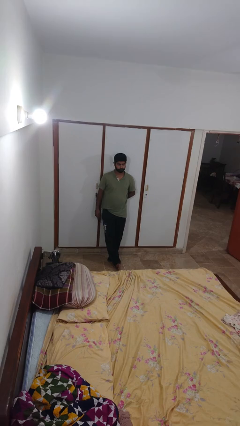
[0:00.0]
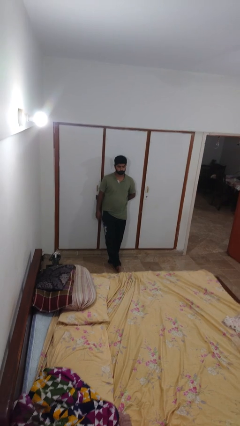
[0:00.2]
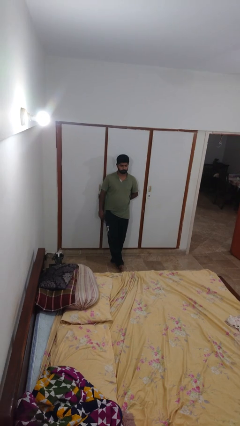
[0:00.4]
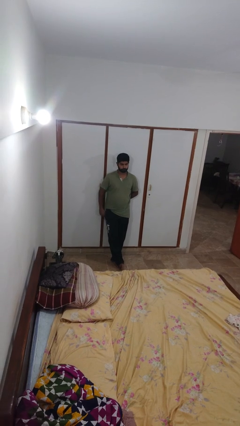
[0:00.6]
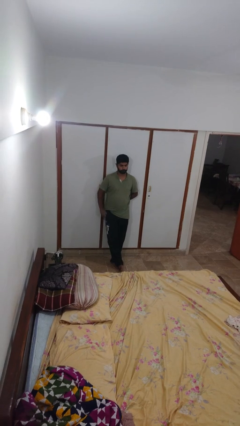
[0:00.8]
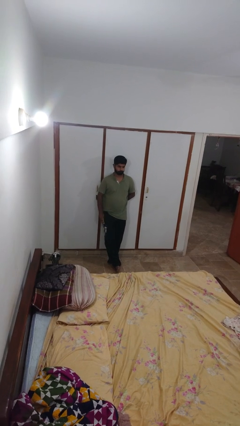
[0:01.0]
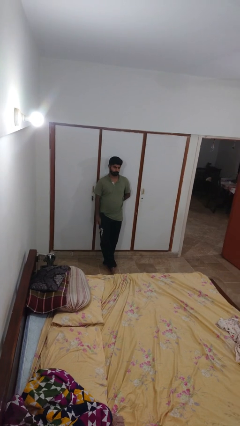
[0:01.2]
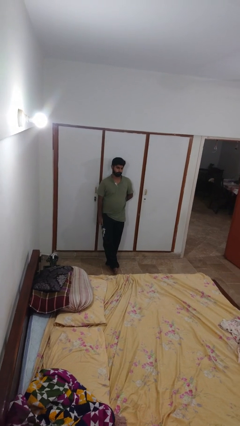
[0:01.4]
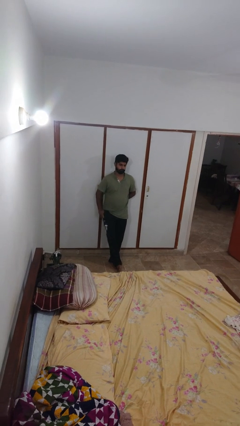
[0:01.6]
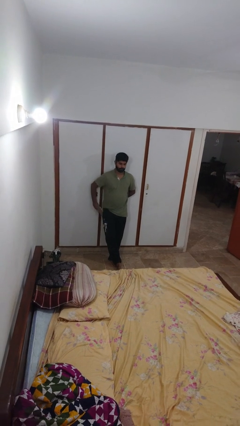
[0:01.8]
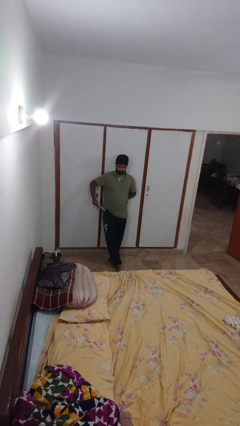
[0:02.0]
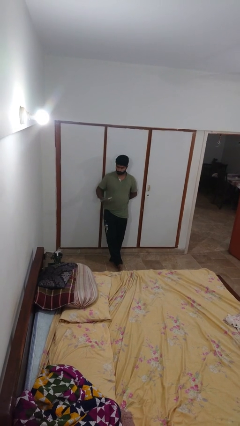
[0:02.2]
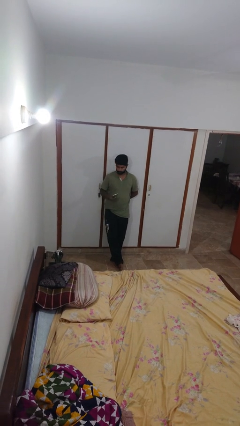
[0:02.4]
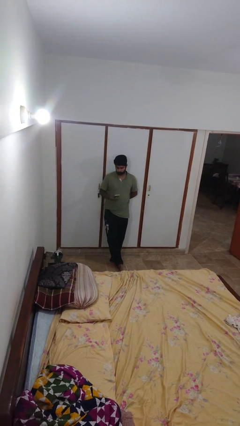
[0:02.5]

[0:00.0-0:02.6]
person takes phone from pocket

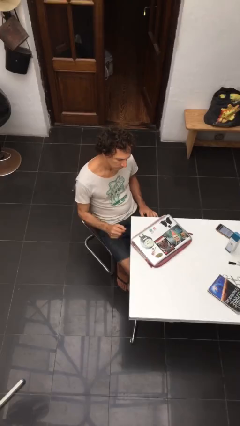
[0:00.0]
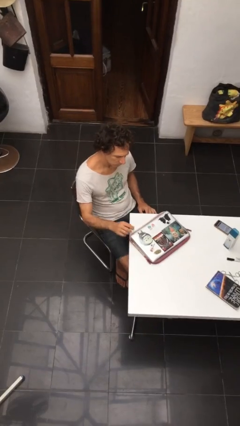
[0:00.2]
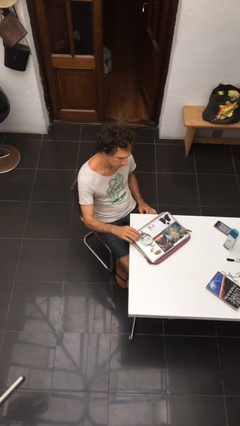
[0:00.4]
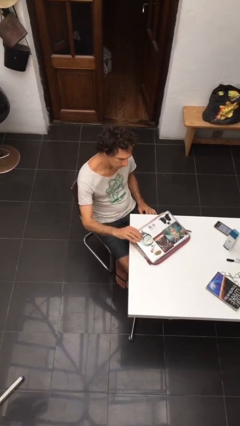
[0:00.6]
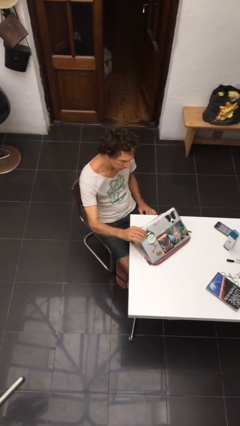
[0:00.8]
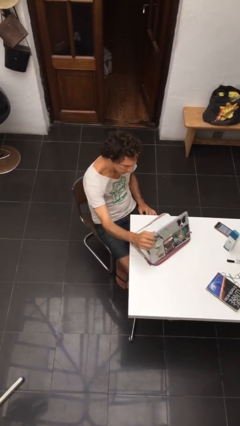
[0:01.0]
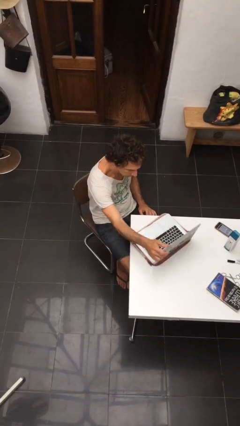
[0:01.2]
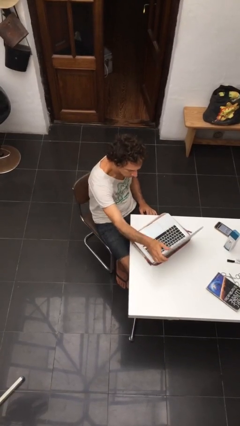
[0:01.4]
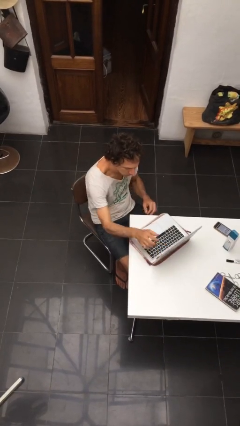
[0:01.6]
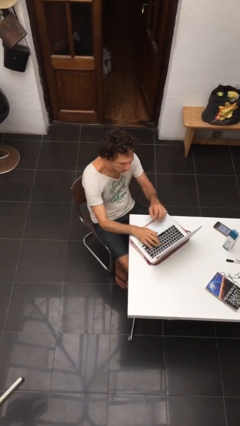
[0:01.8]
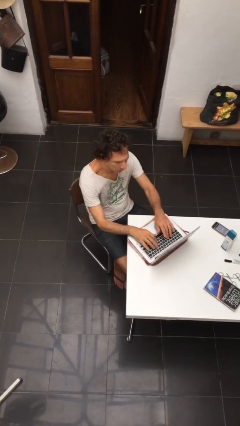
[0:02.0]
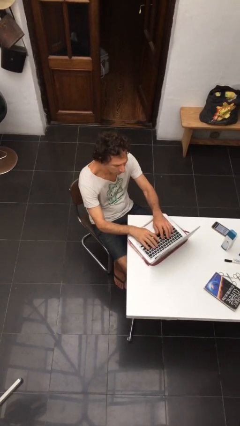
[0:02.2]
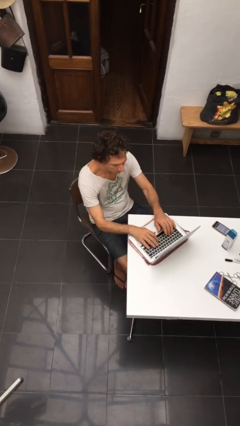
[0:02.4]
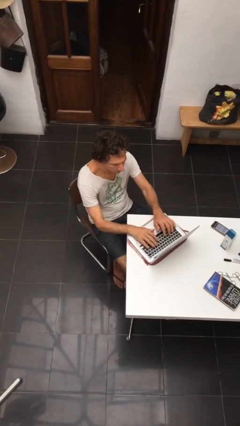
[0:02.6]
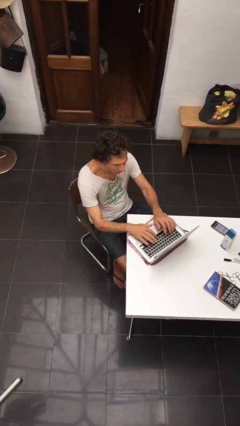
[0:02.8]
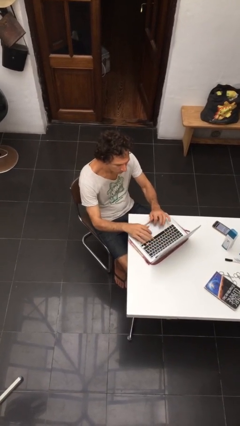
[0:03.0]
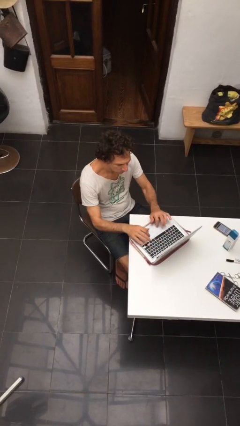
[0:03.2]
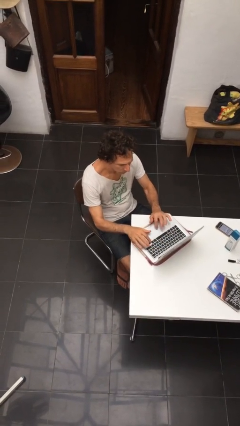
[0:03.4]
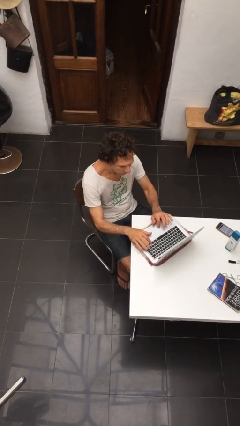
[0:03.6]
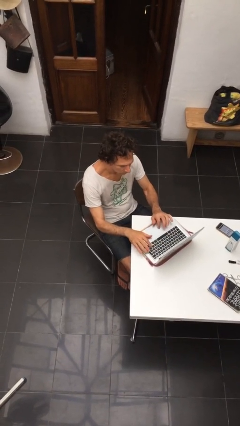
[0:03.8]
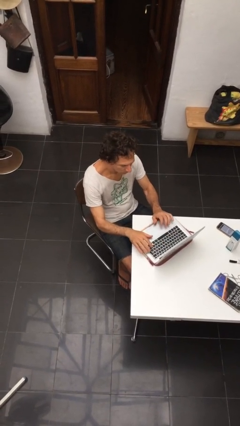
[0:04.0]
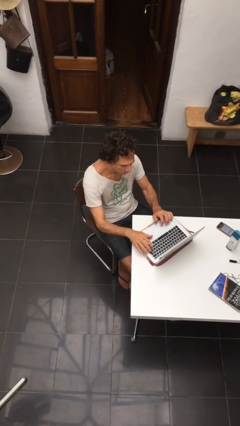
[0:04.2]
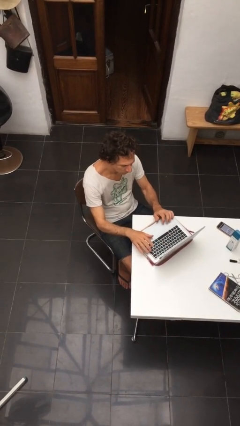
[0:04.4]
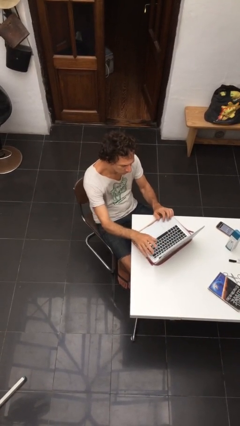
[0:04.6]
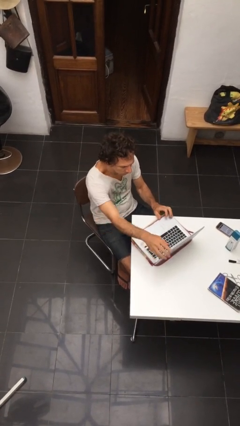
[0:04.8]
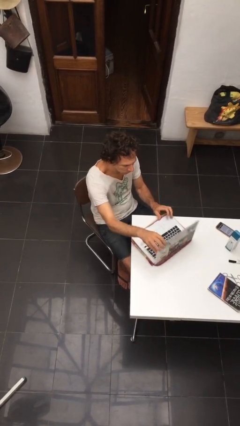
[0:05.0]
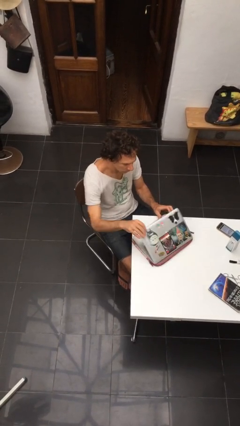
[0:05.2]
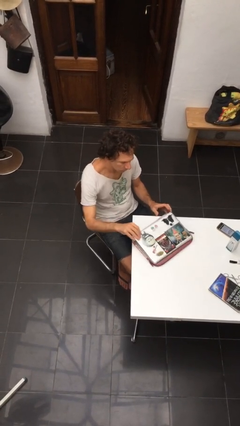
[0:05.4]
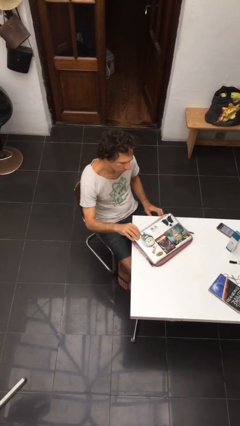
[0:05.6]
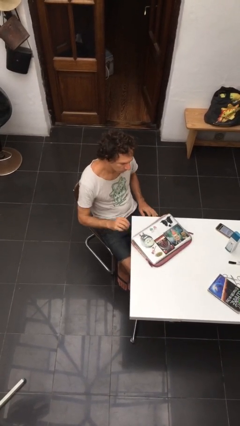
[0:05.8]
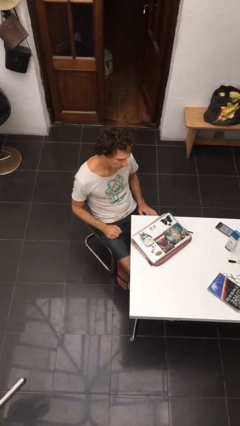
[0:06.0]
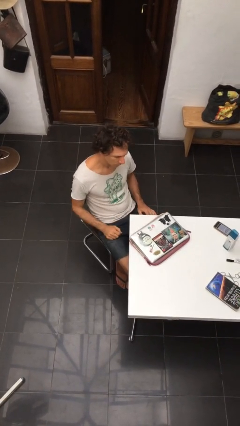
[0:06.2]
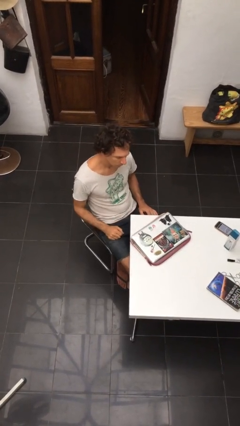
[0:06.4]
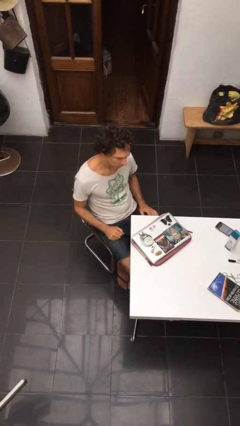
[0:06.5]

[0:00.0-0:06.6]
person interacts with laptop

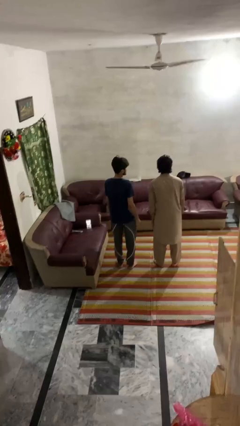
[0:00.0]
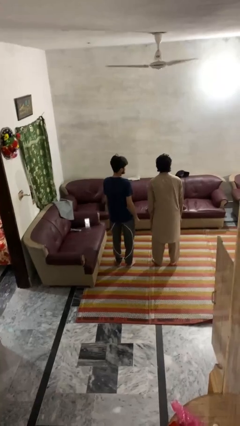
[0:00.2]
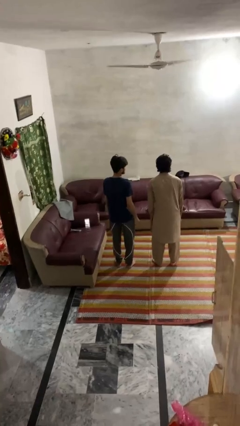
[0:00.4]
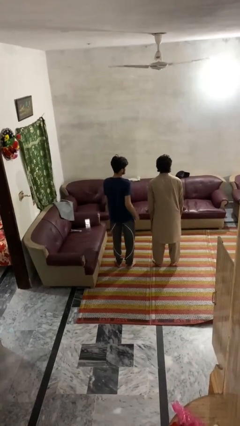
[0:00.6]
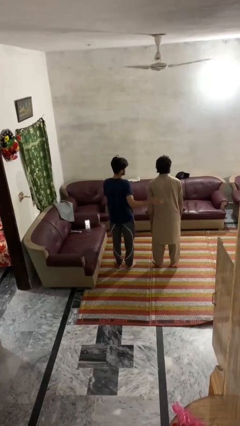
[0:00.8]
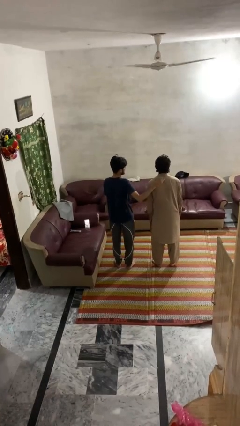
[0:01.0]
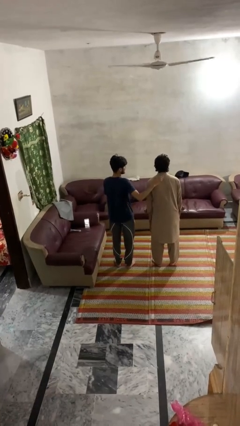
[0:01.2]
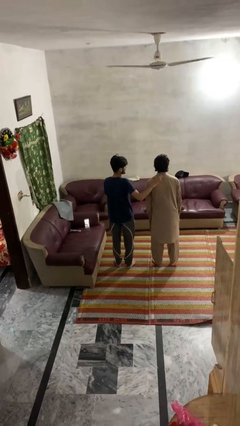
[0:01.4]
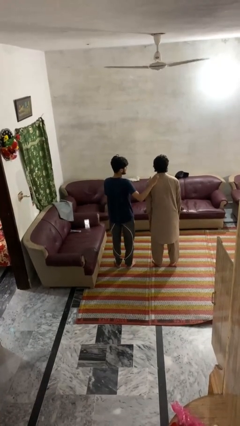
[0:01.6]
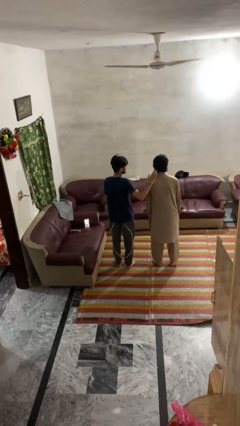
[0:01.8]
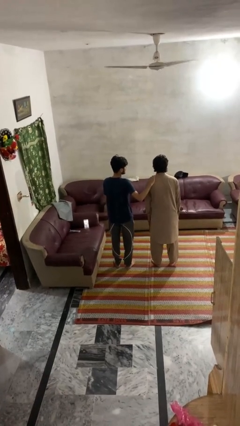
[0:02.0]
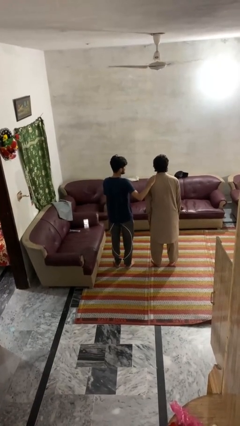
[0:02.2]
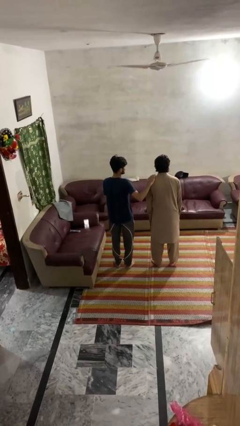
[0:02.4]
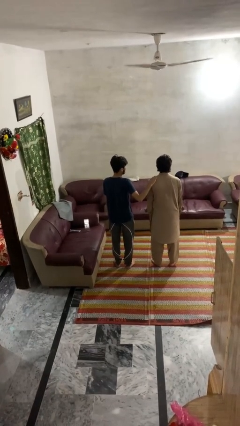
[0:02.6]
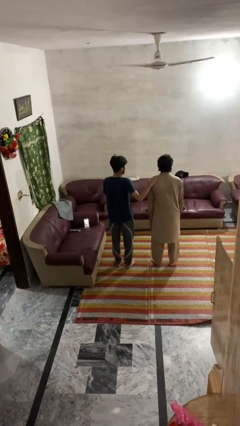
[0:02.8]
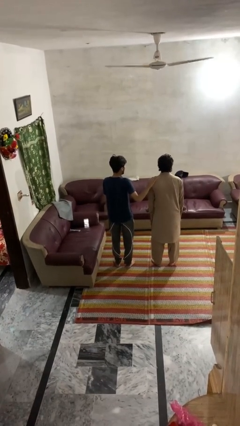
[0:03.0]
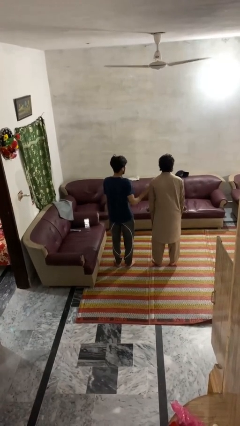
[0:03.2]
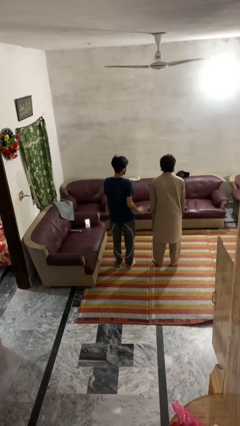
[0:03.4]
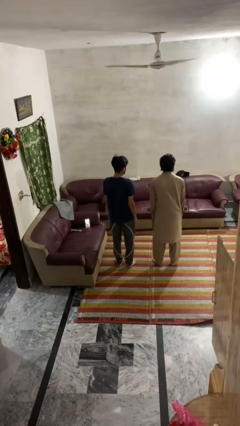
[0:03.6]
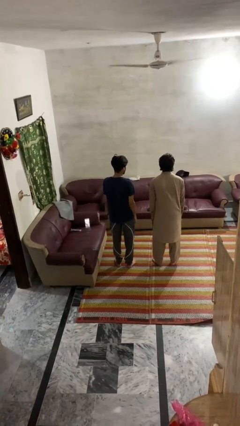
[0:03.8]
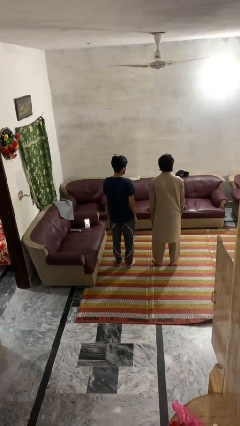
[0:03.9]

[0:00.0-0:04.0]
person pounds shoulders of person

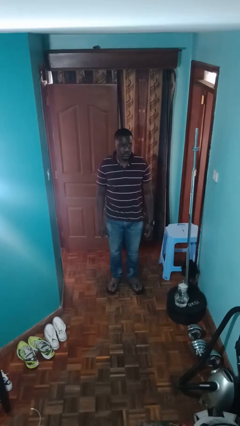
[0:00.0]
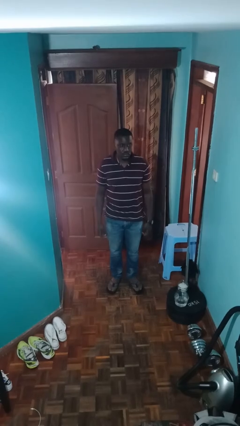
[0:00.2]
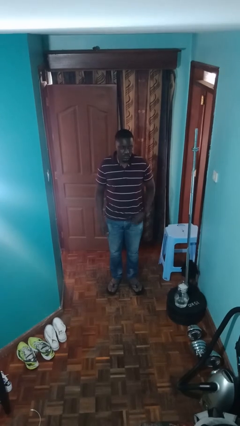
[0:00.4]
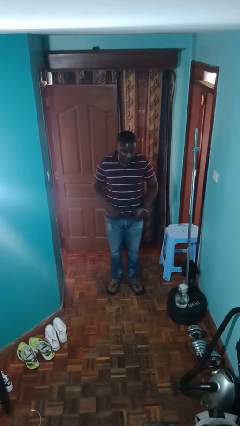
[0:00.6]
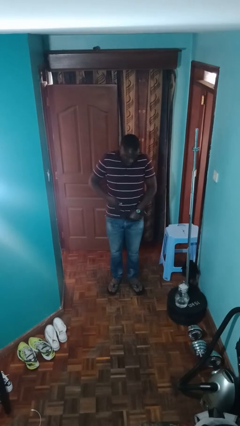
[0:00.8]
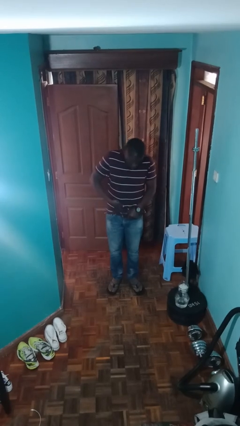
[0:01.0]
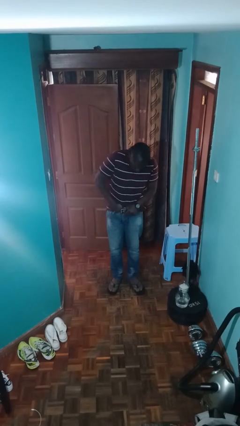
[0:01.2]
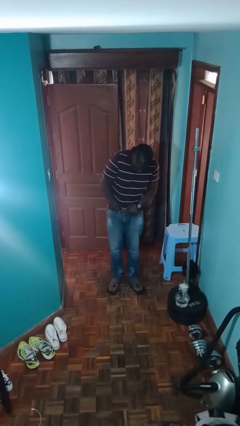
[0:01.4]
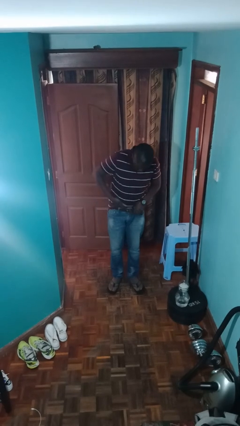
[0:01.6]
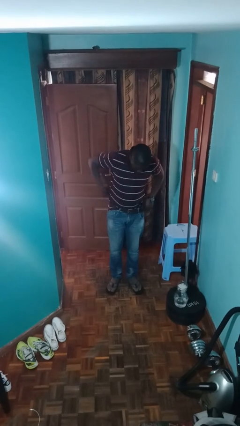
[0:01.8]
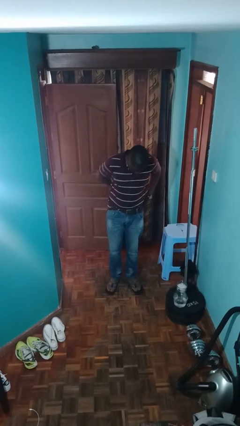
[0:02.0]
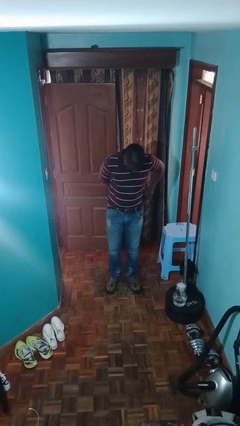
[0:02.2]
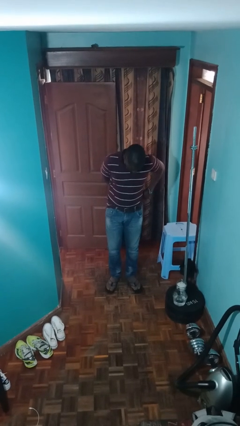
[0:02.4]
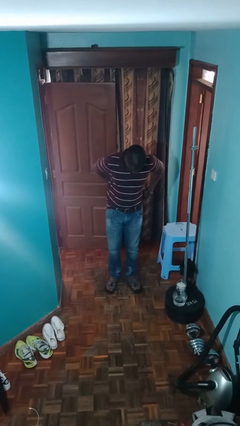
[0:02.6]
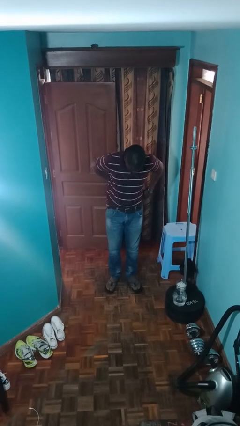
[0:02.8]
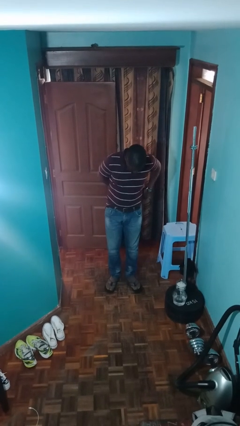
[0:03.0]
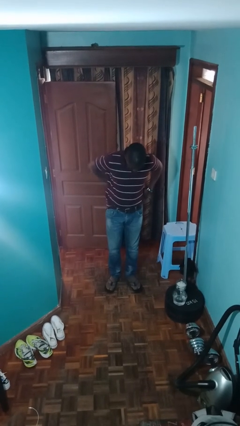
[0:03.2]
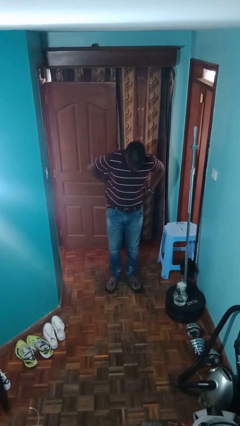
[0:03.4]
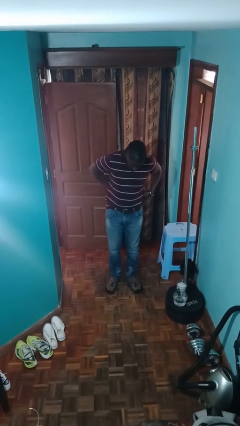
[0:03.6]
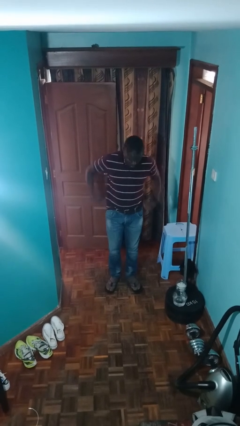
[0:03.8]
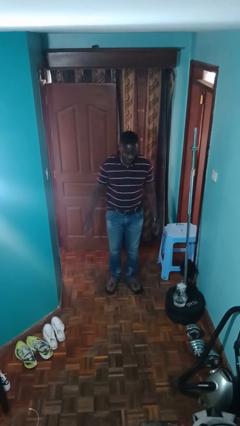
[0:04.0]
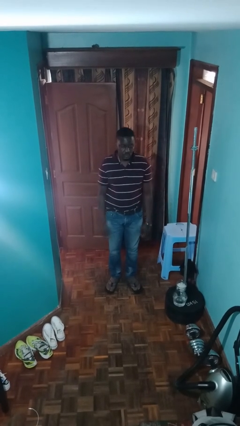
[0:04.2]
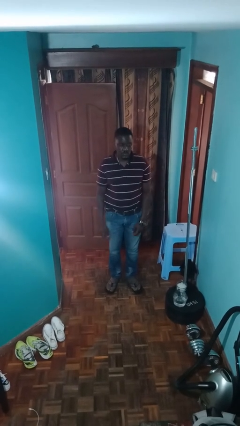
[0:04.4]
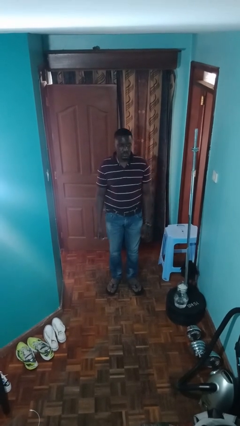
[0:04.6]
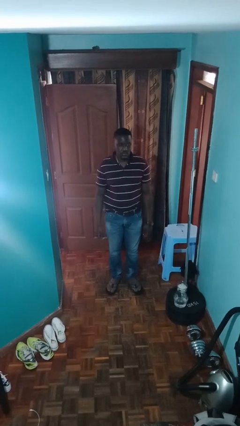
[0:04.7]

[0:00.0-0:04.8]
person tucks in shirt
